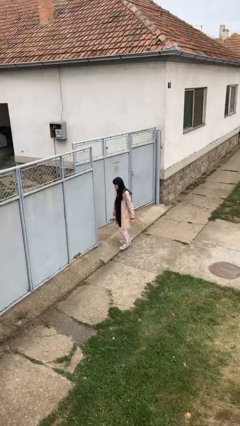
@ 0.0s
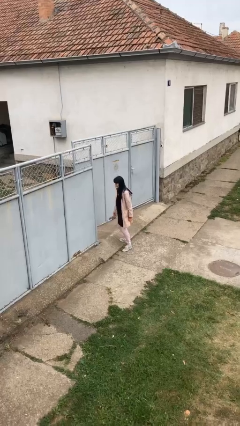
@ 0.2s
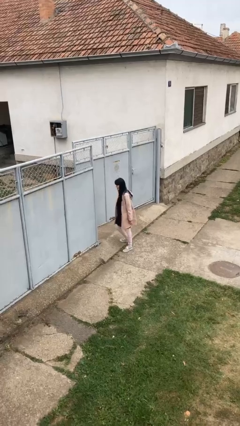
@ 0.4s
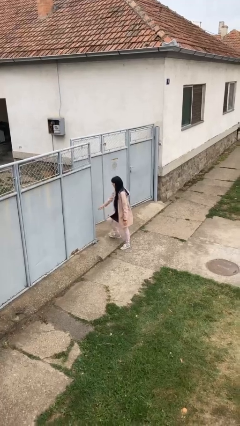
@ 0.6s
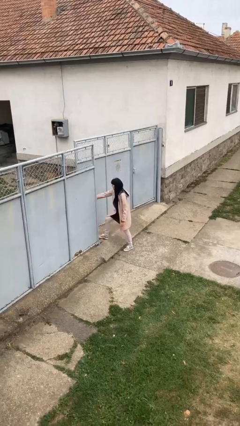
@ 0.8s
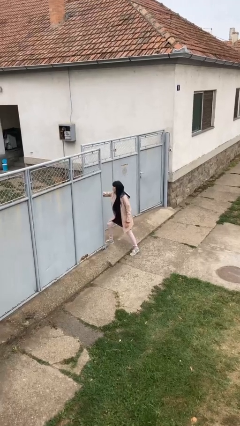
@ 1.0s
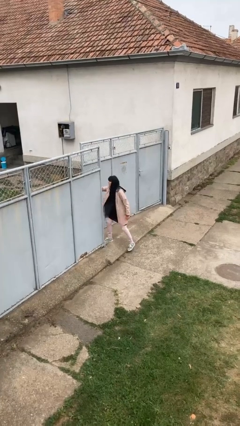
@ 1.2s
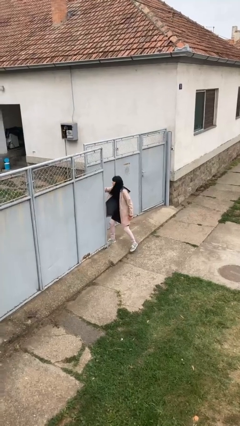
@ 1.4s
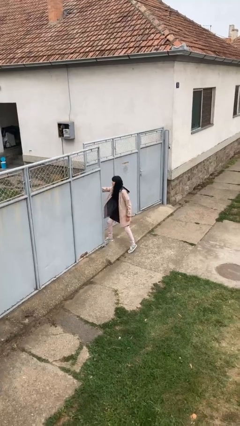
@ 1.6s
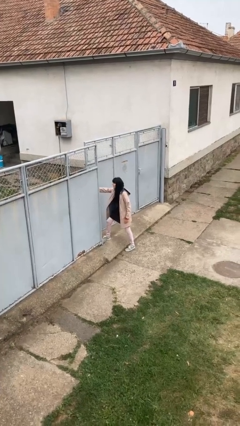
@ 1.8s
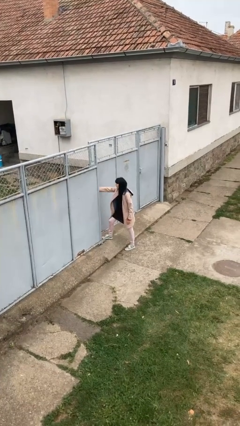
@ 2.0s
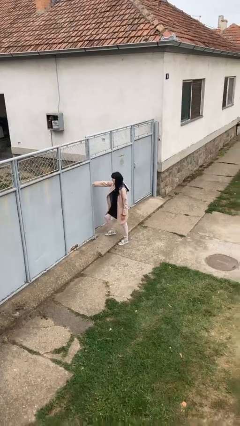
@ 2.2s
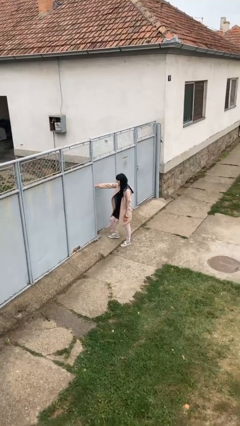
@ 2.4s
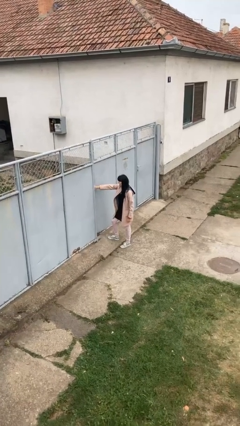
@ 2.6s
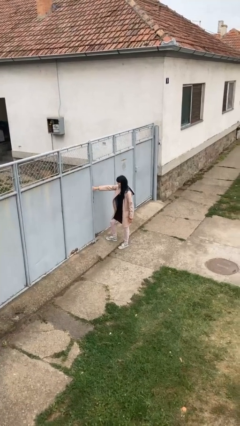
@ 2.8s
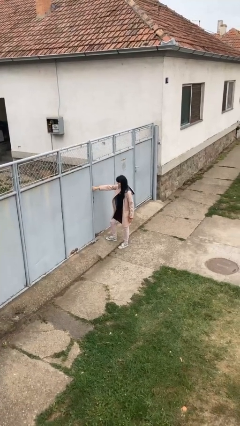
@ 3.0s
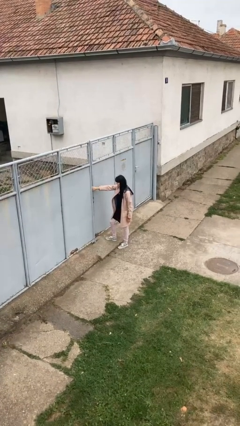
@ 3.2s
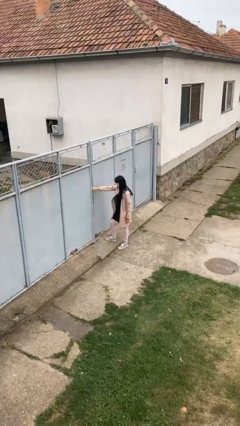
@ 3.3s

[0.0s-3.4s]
person closes gate

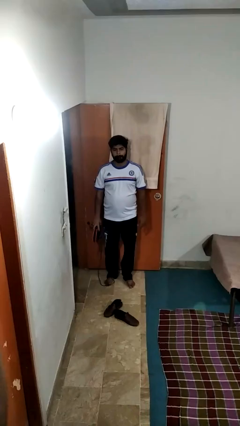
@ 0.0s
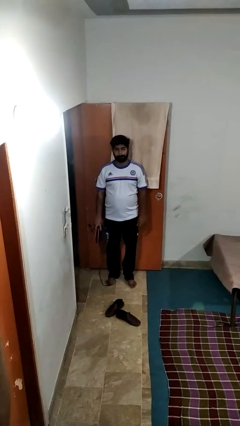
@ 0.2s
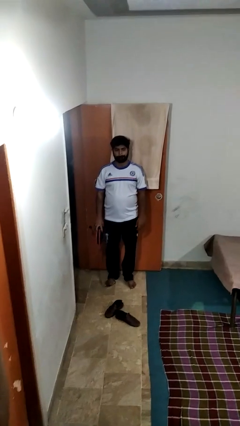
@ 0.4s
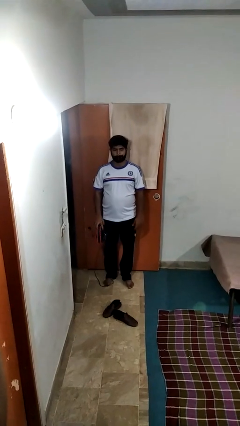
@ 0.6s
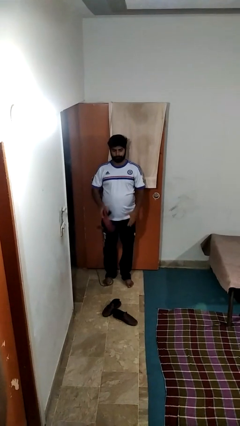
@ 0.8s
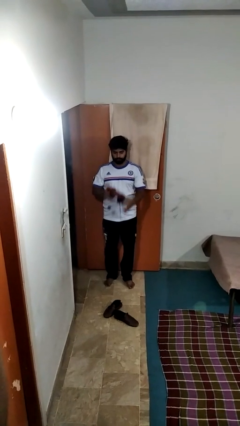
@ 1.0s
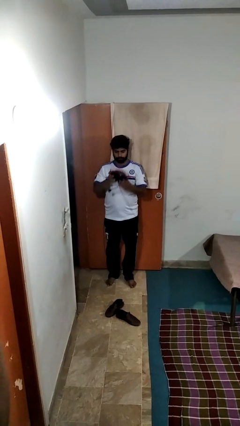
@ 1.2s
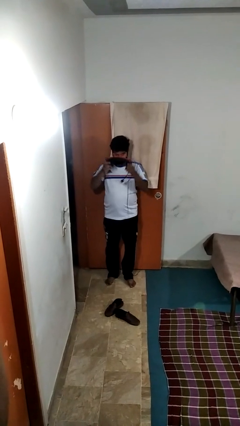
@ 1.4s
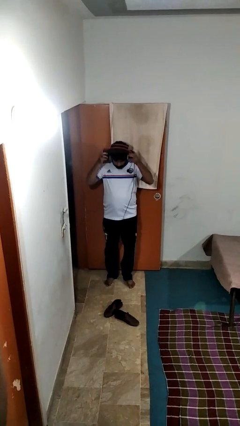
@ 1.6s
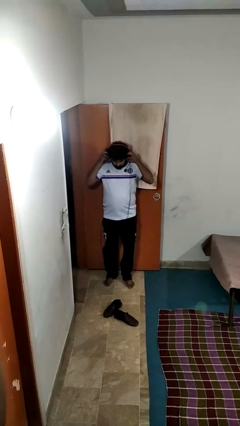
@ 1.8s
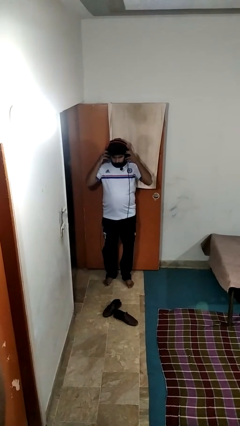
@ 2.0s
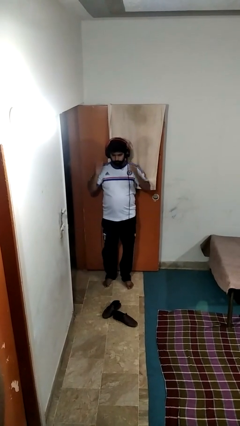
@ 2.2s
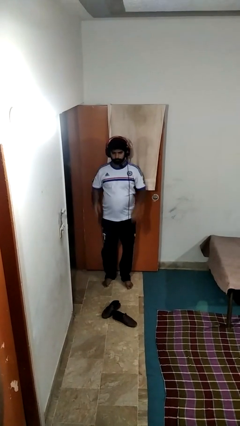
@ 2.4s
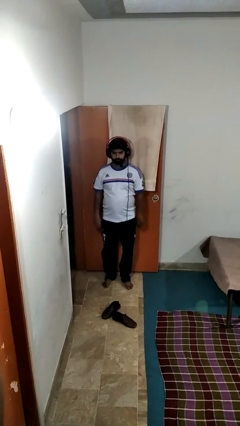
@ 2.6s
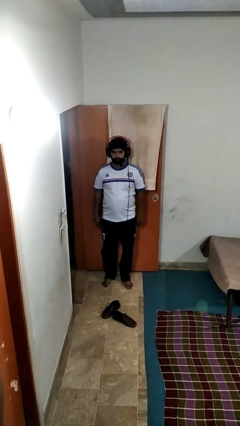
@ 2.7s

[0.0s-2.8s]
person puts on headphones

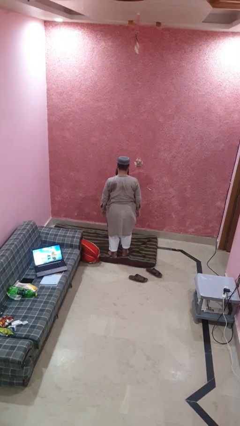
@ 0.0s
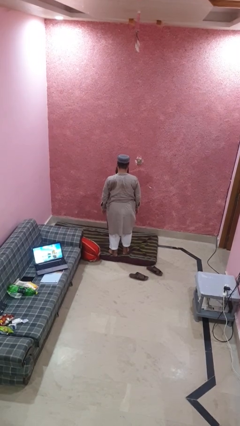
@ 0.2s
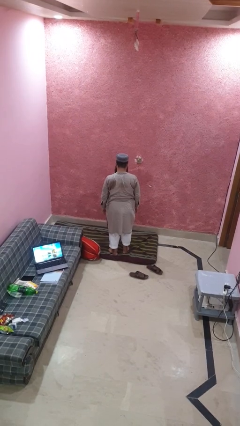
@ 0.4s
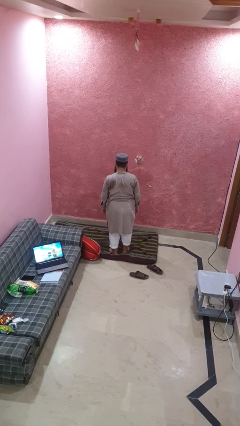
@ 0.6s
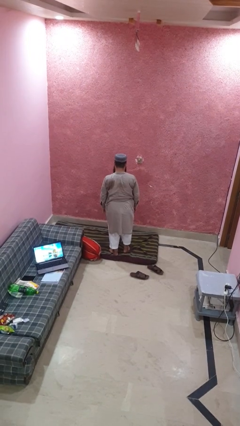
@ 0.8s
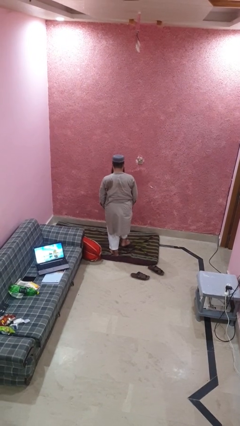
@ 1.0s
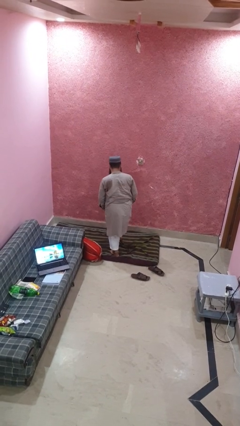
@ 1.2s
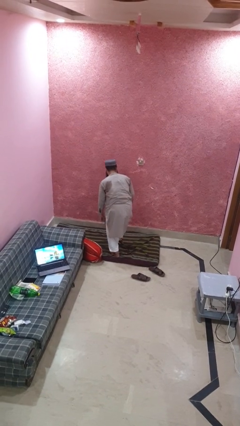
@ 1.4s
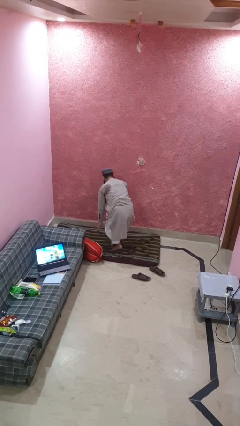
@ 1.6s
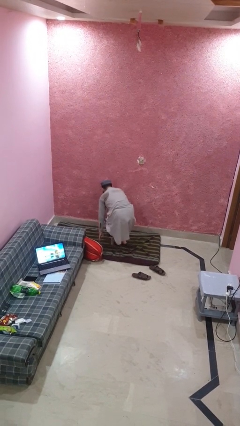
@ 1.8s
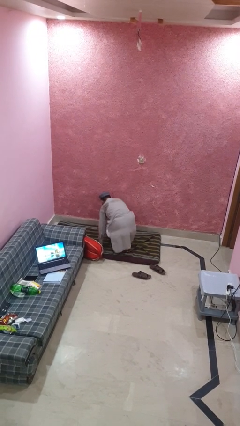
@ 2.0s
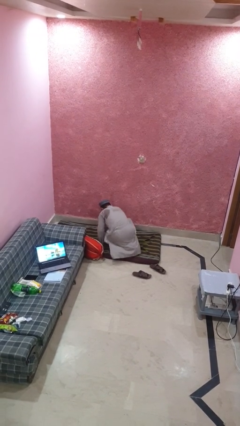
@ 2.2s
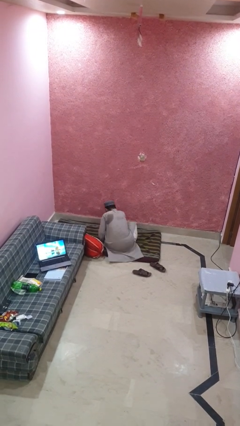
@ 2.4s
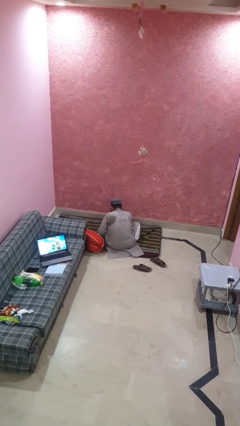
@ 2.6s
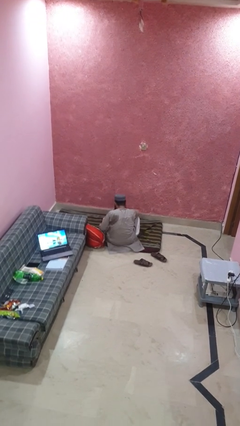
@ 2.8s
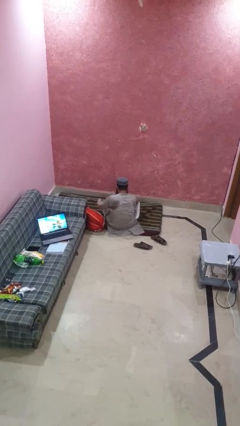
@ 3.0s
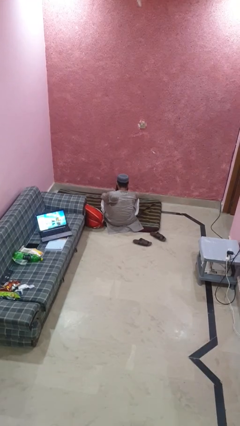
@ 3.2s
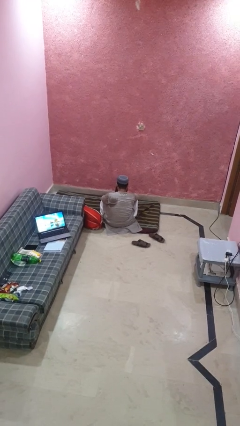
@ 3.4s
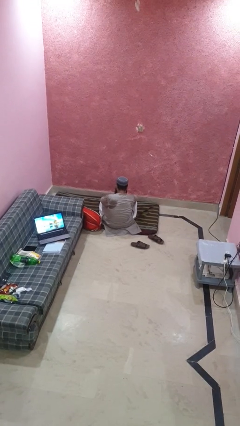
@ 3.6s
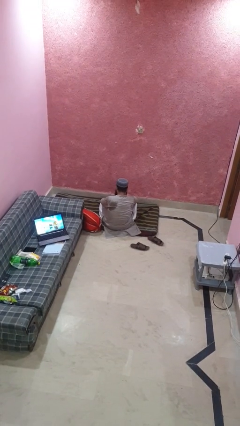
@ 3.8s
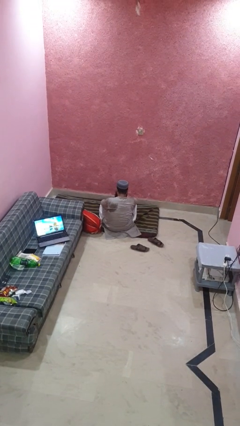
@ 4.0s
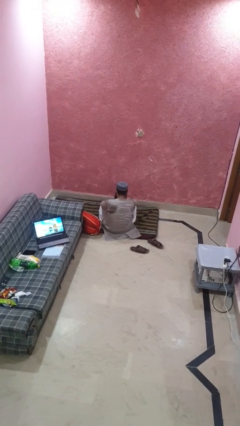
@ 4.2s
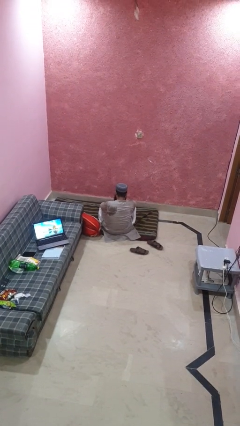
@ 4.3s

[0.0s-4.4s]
person sits crisscross

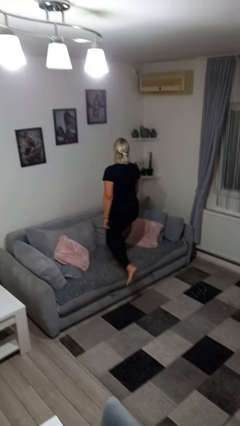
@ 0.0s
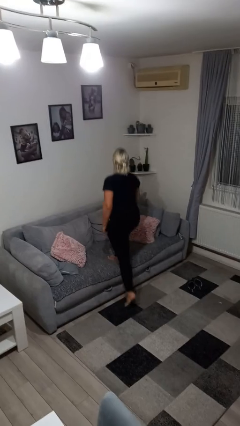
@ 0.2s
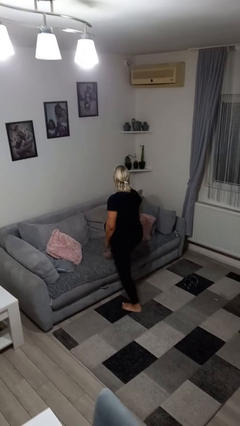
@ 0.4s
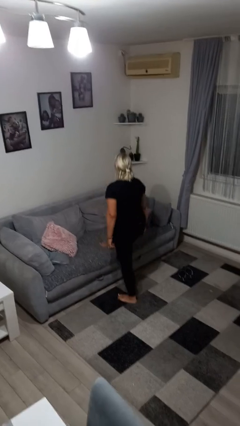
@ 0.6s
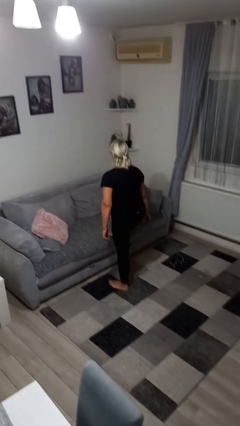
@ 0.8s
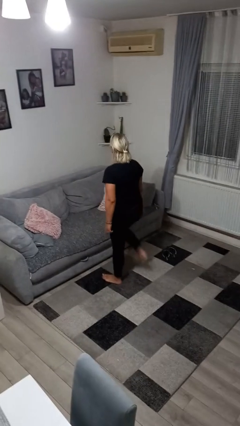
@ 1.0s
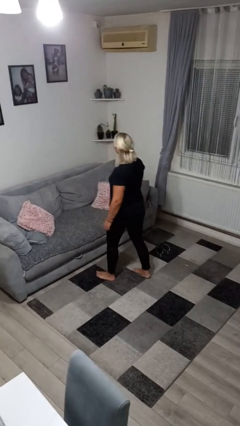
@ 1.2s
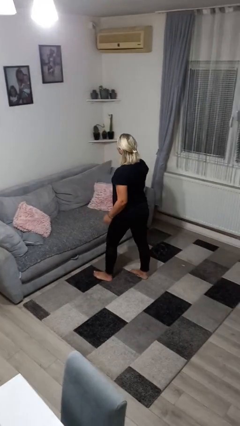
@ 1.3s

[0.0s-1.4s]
person climbs off couch

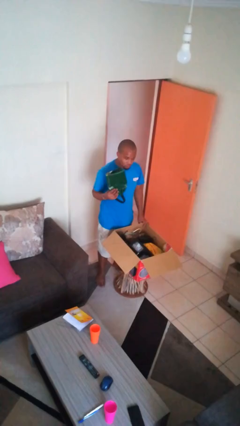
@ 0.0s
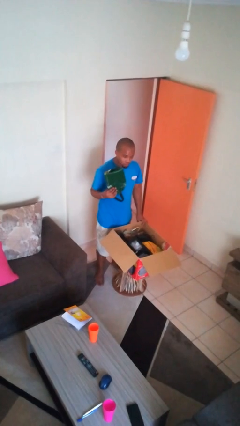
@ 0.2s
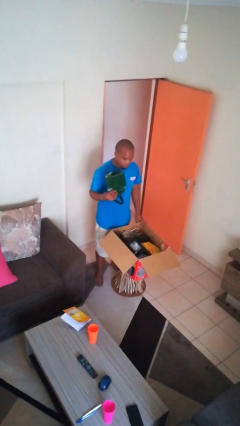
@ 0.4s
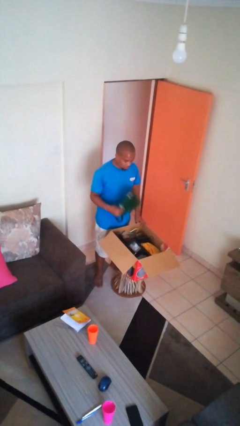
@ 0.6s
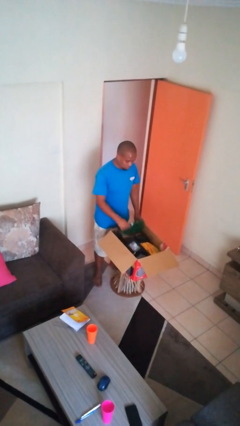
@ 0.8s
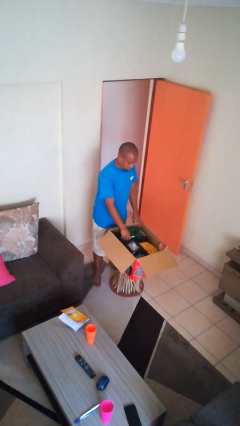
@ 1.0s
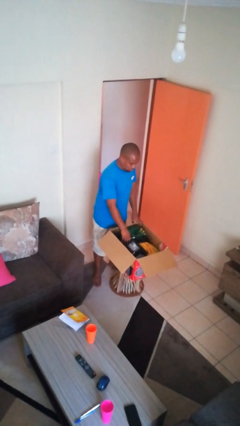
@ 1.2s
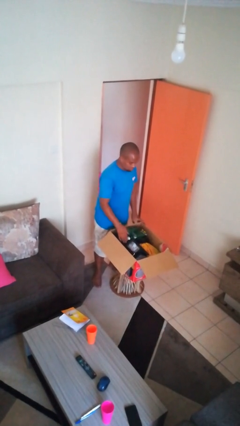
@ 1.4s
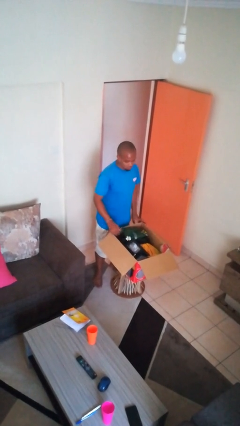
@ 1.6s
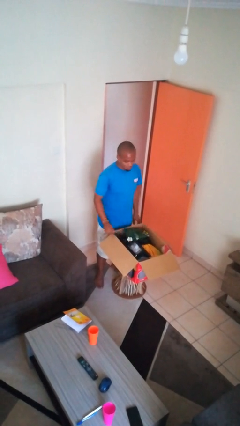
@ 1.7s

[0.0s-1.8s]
person puts object into box

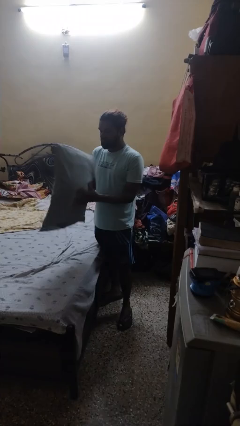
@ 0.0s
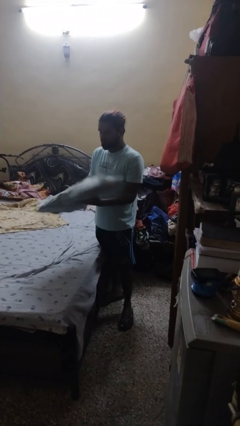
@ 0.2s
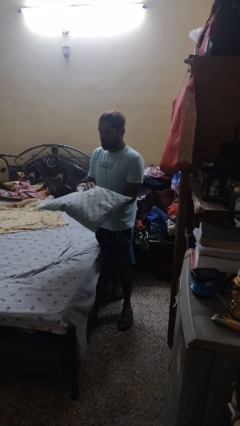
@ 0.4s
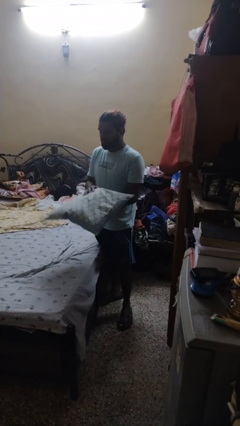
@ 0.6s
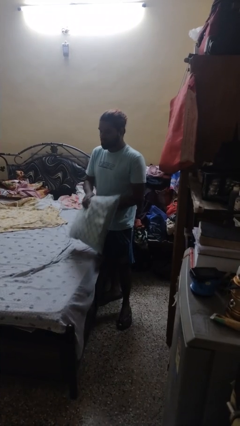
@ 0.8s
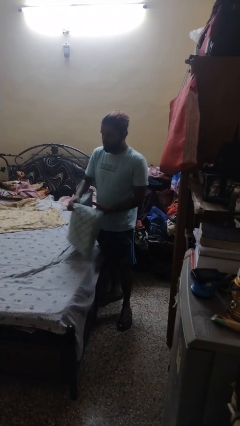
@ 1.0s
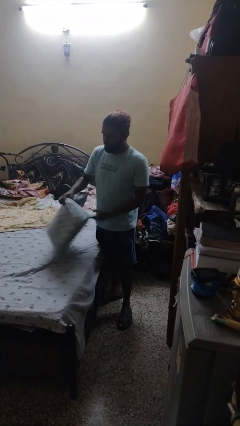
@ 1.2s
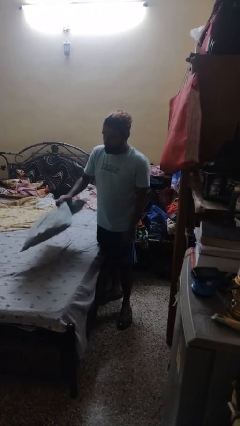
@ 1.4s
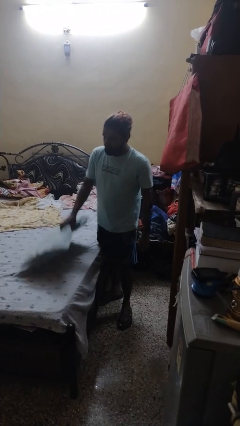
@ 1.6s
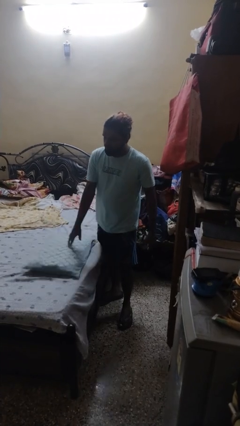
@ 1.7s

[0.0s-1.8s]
person puts down object on bed

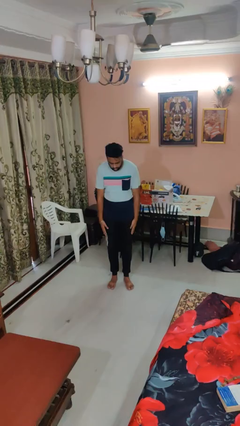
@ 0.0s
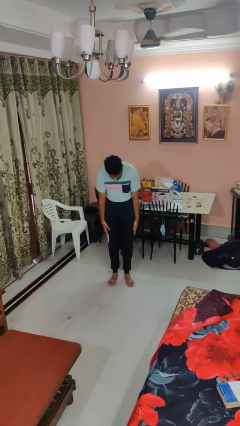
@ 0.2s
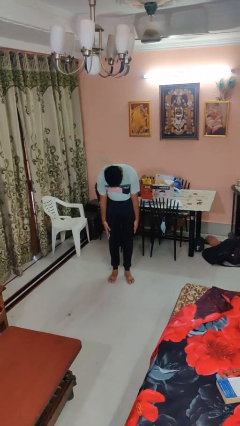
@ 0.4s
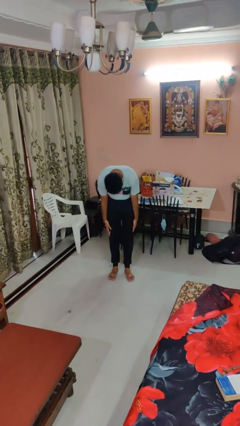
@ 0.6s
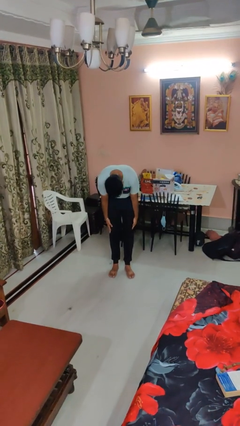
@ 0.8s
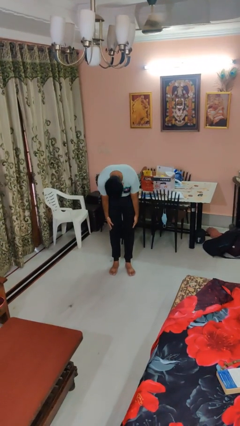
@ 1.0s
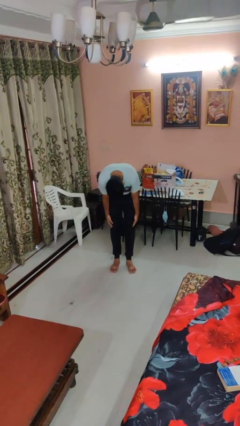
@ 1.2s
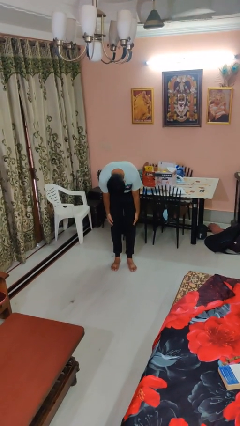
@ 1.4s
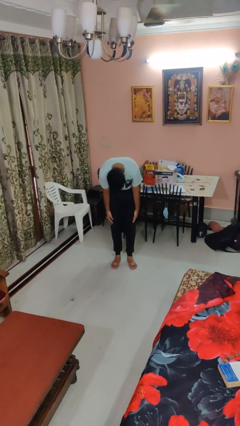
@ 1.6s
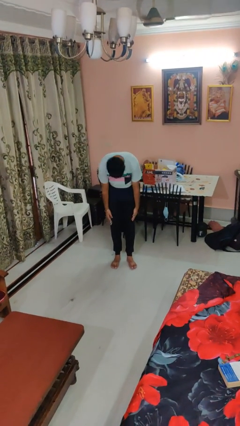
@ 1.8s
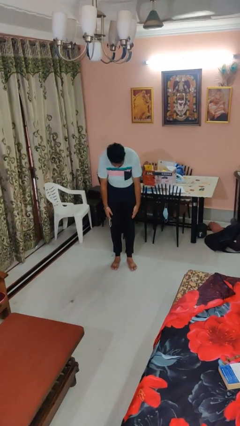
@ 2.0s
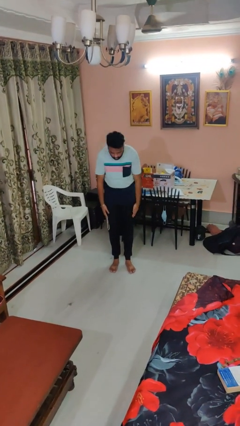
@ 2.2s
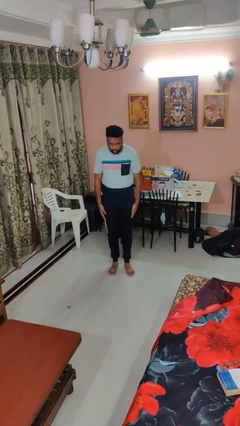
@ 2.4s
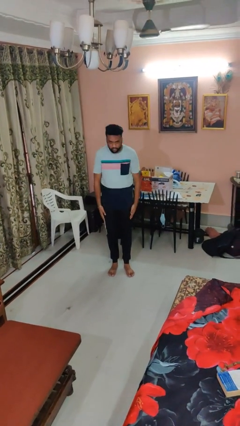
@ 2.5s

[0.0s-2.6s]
person bows
